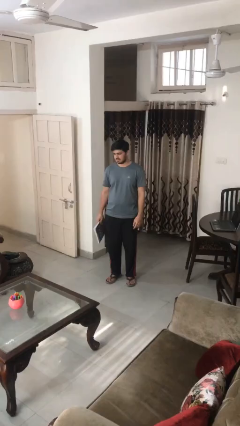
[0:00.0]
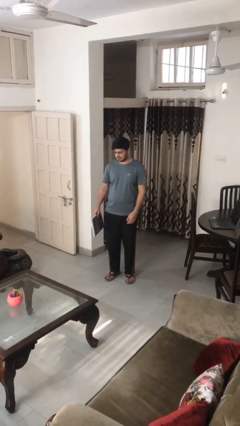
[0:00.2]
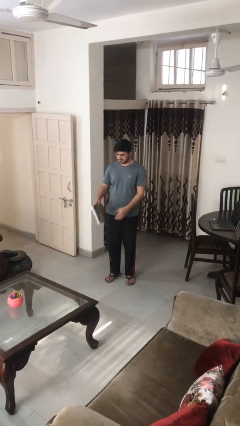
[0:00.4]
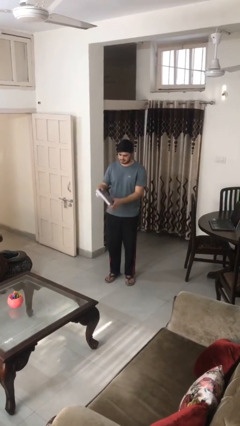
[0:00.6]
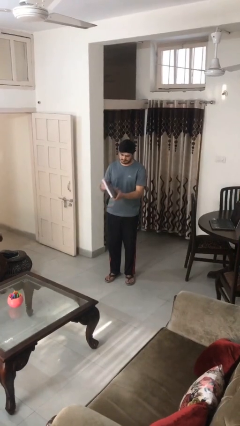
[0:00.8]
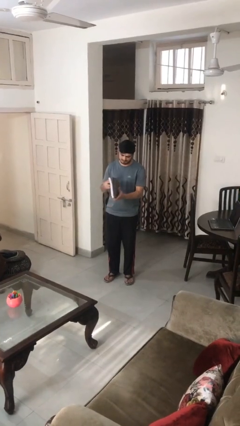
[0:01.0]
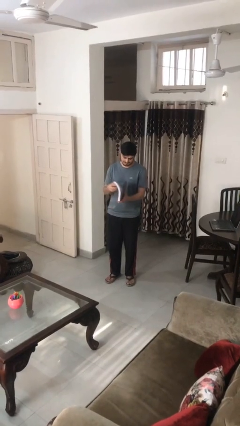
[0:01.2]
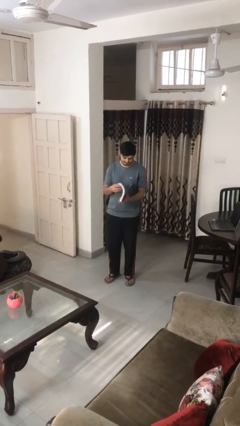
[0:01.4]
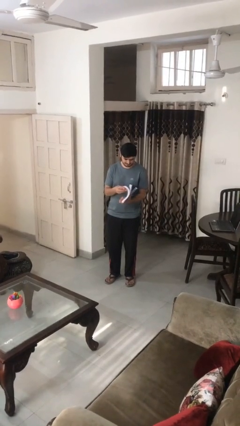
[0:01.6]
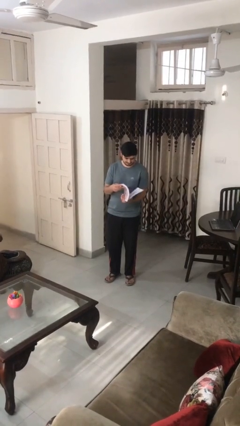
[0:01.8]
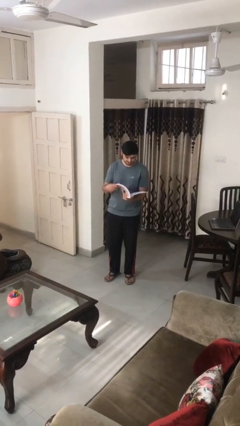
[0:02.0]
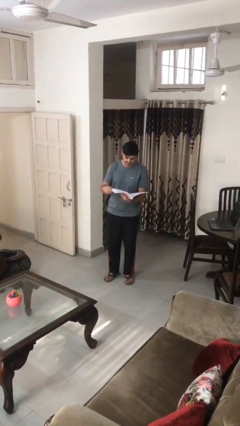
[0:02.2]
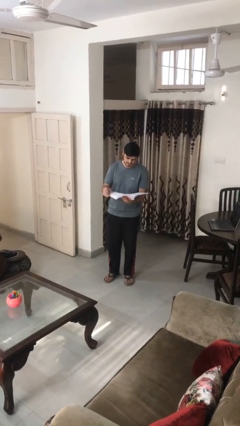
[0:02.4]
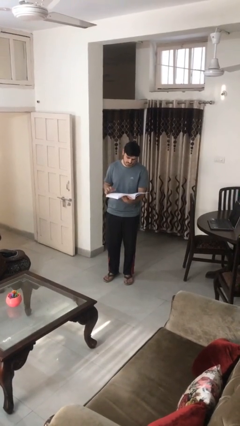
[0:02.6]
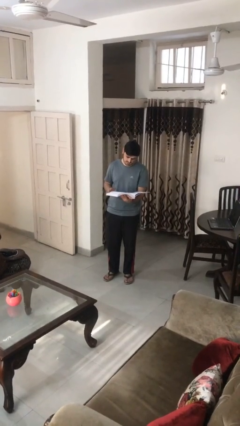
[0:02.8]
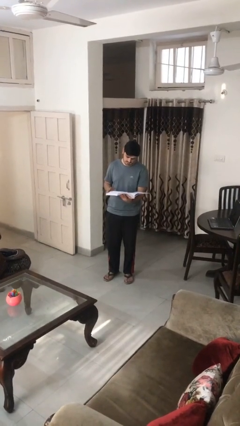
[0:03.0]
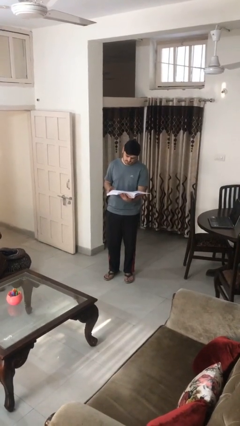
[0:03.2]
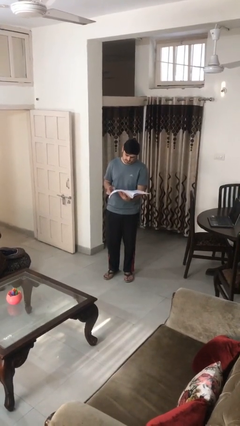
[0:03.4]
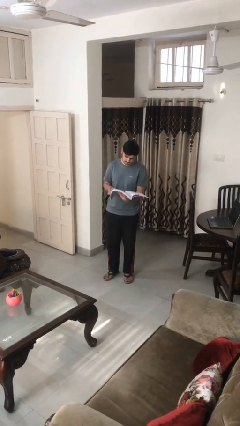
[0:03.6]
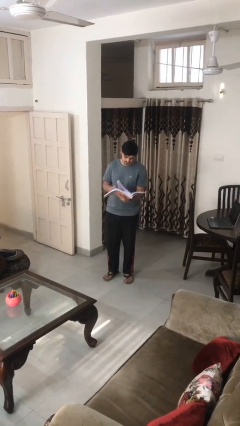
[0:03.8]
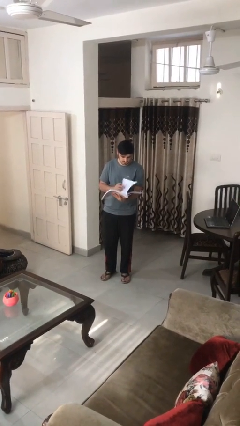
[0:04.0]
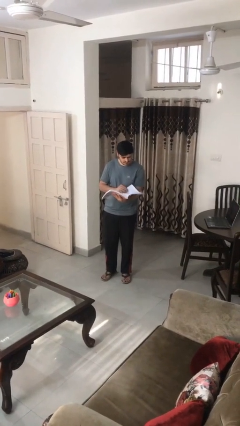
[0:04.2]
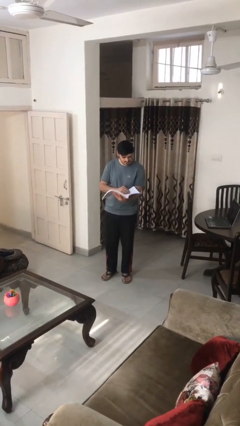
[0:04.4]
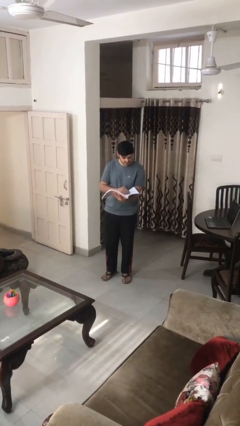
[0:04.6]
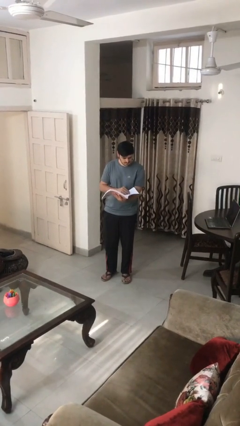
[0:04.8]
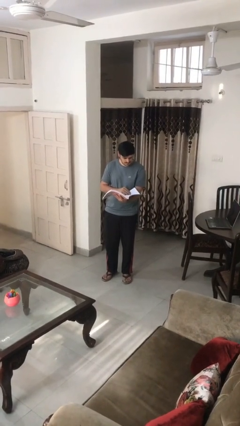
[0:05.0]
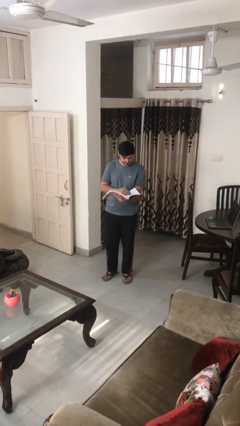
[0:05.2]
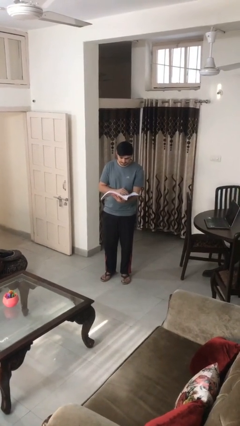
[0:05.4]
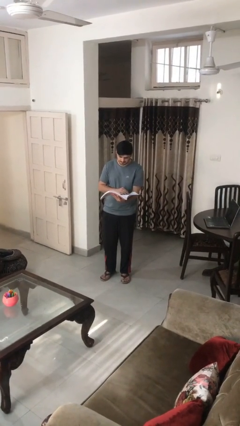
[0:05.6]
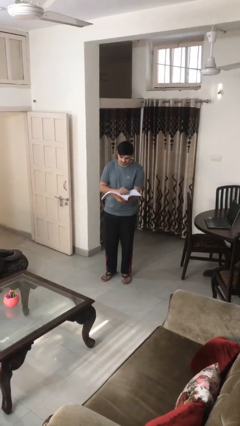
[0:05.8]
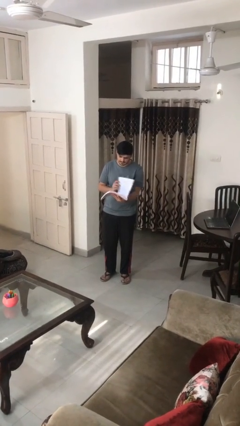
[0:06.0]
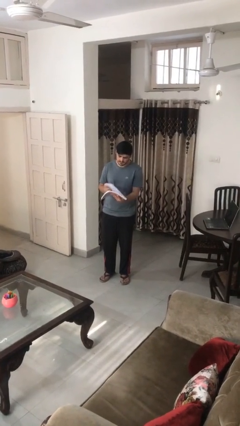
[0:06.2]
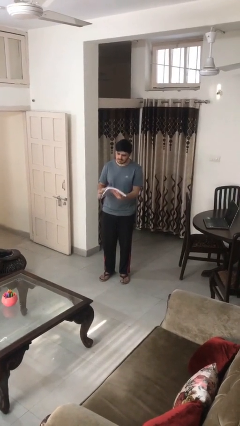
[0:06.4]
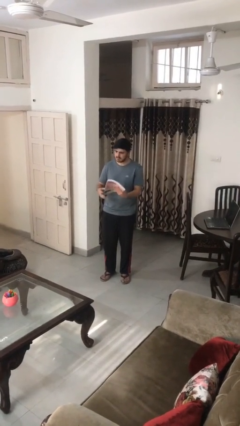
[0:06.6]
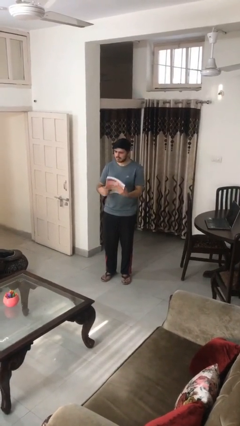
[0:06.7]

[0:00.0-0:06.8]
person reads document

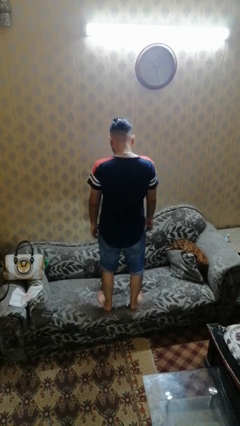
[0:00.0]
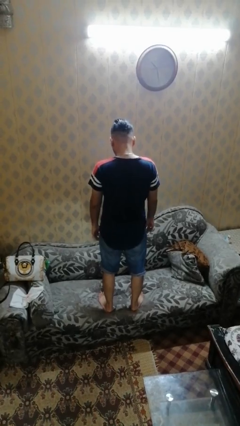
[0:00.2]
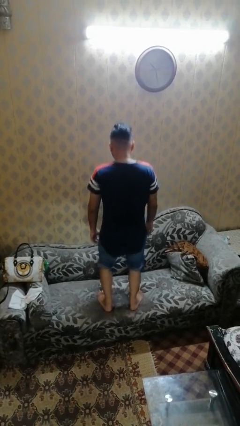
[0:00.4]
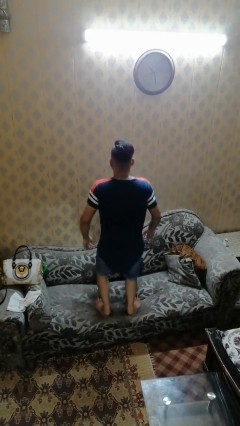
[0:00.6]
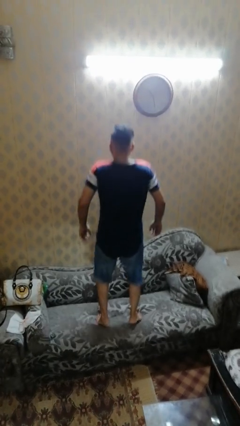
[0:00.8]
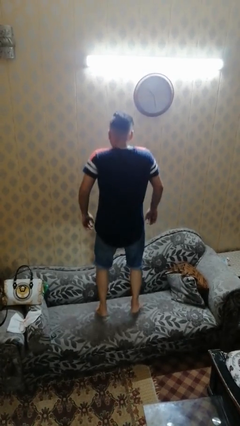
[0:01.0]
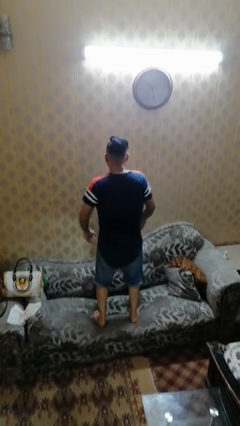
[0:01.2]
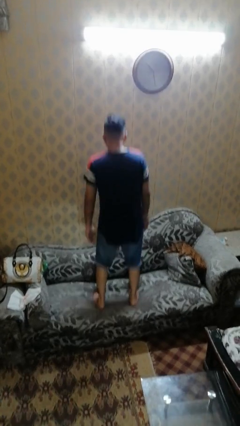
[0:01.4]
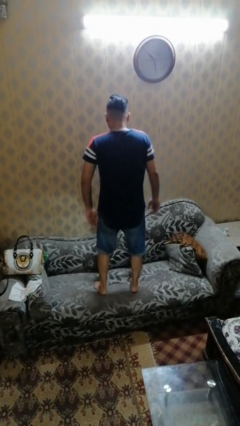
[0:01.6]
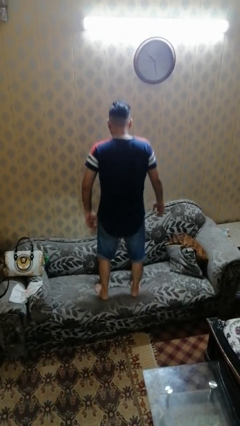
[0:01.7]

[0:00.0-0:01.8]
person jumps on couch

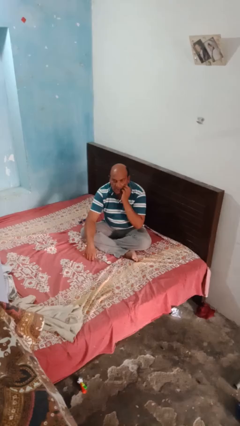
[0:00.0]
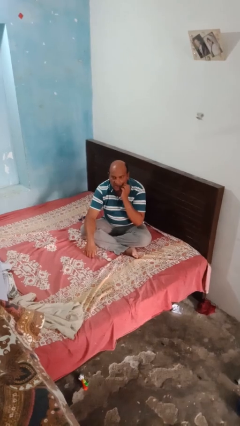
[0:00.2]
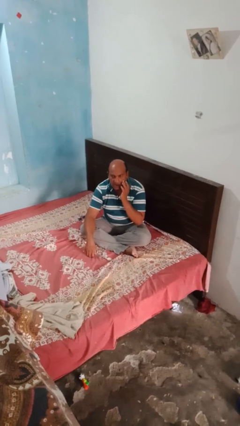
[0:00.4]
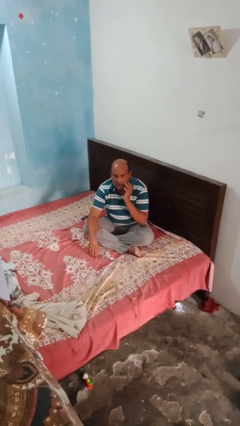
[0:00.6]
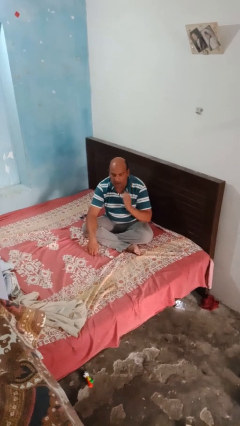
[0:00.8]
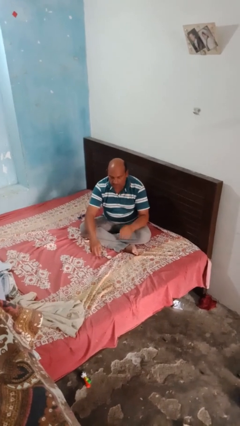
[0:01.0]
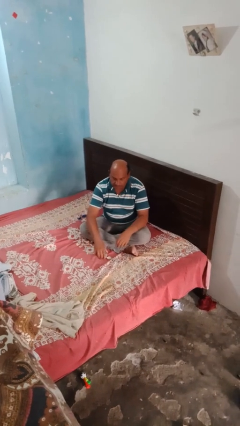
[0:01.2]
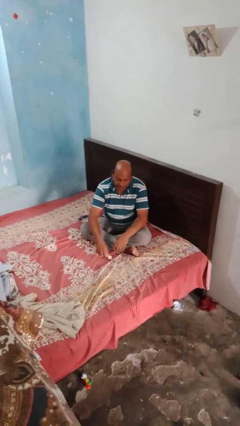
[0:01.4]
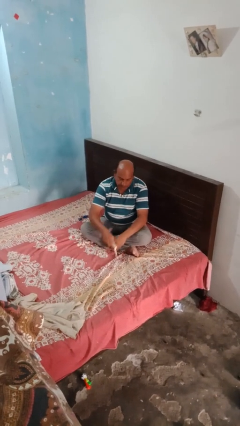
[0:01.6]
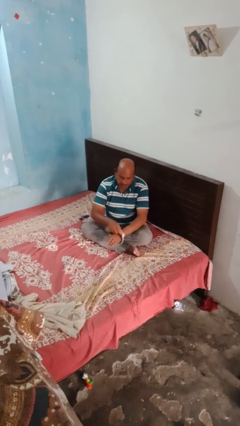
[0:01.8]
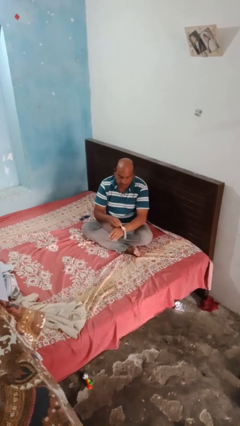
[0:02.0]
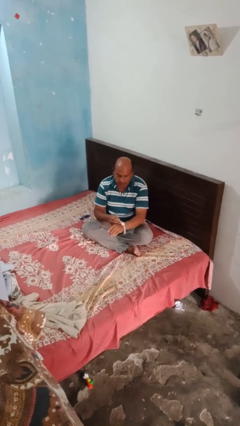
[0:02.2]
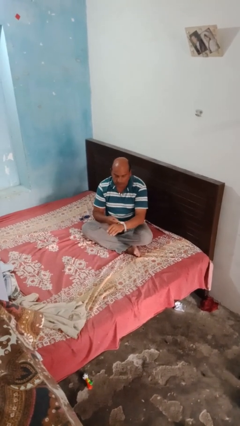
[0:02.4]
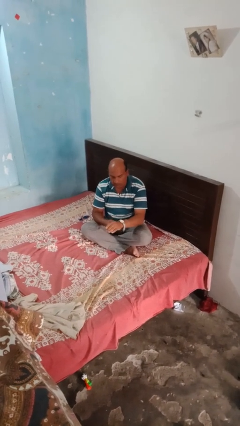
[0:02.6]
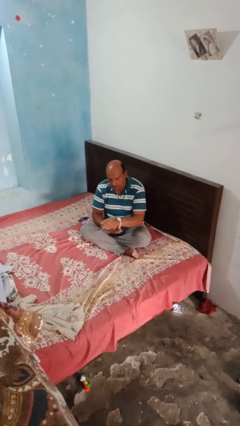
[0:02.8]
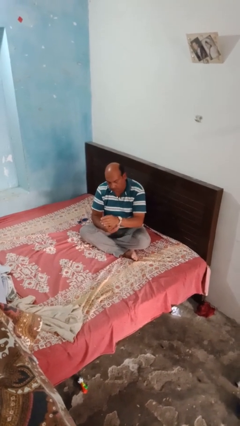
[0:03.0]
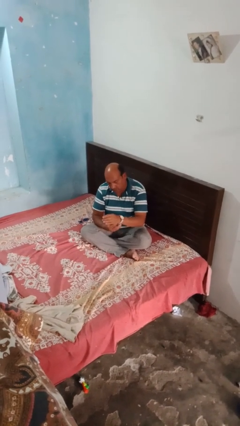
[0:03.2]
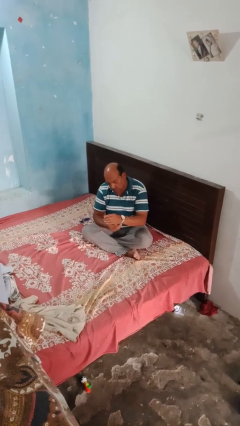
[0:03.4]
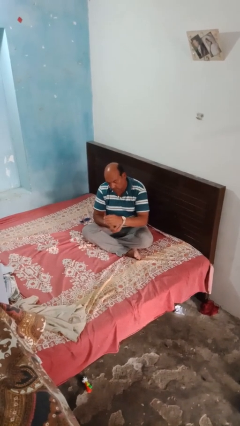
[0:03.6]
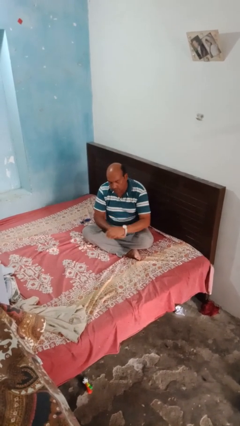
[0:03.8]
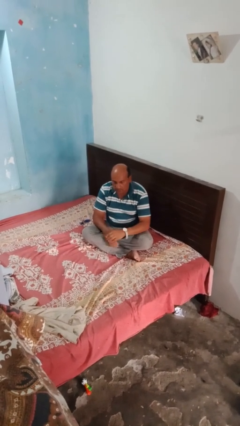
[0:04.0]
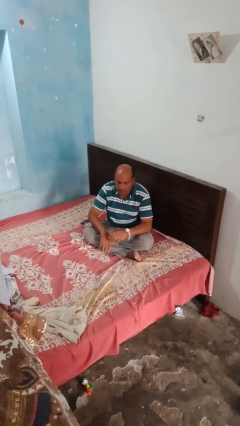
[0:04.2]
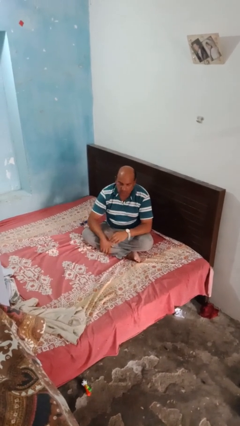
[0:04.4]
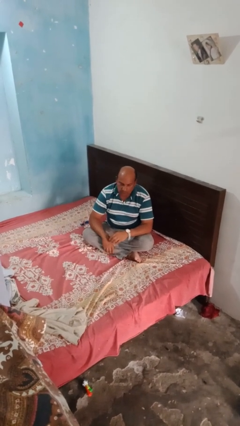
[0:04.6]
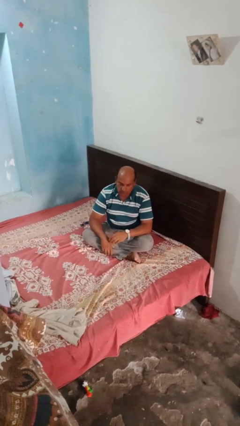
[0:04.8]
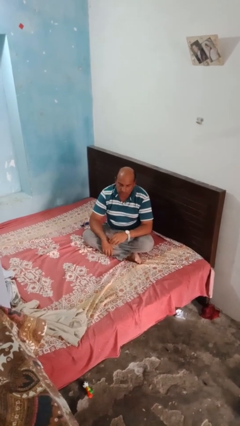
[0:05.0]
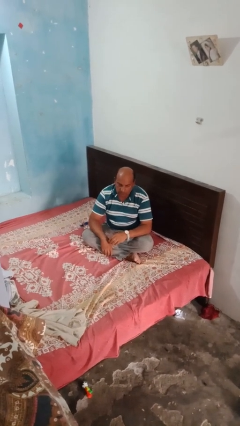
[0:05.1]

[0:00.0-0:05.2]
person puts on wristwatch

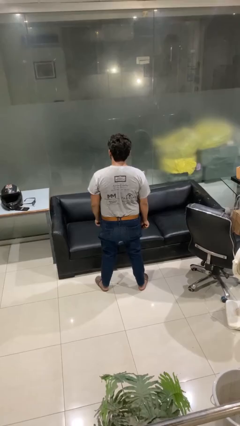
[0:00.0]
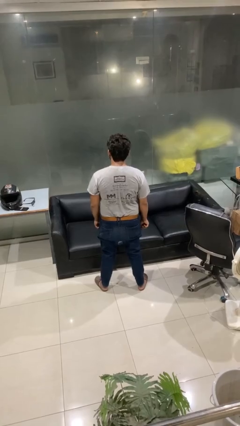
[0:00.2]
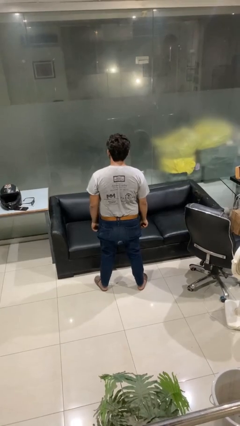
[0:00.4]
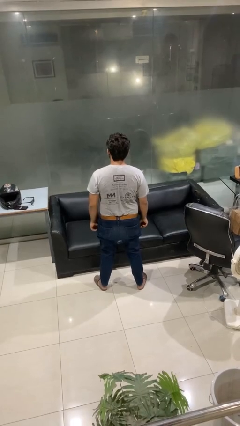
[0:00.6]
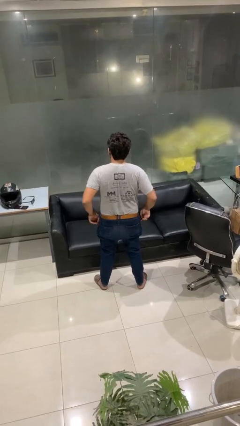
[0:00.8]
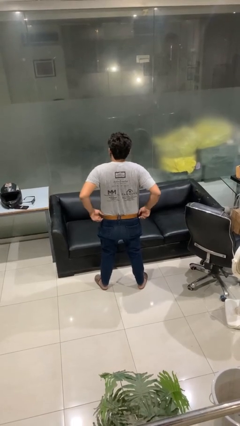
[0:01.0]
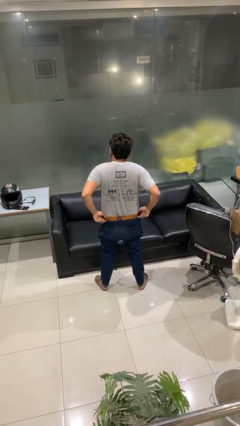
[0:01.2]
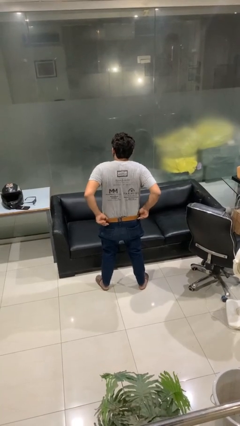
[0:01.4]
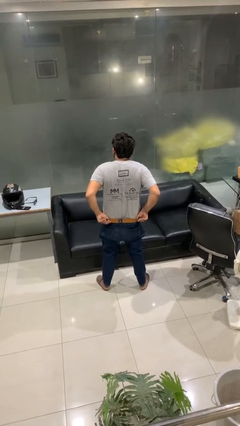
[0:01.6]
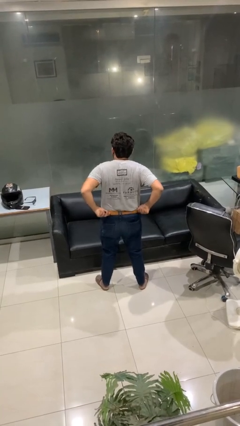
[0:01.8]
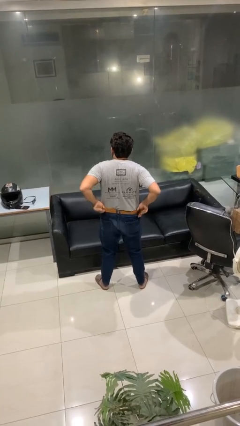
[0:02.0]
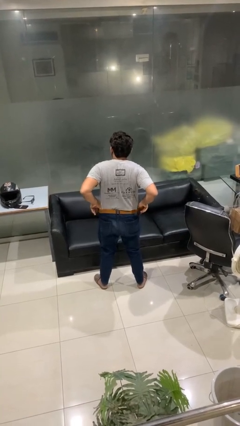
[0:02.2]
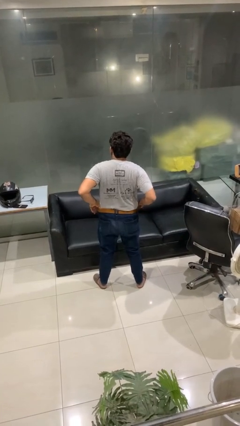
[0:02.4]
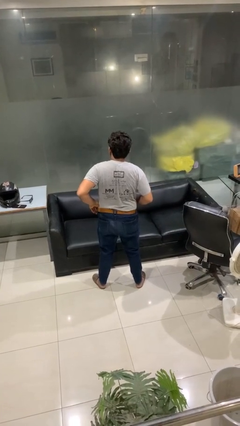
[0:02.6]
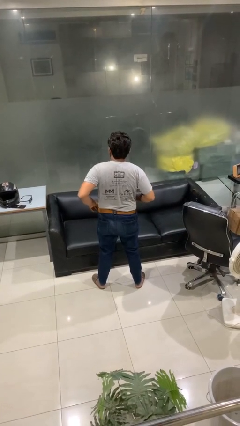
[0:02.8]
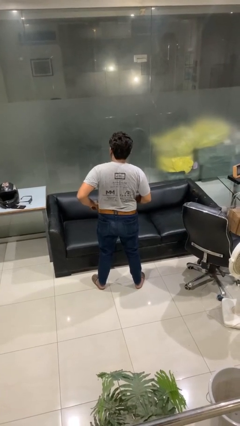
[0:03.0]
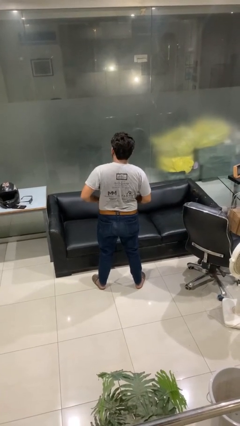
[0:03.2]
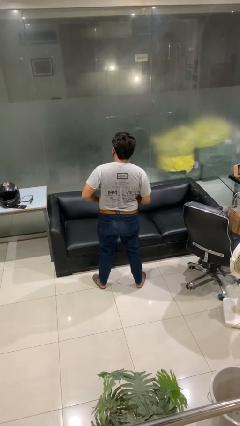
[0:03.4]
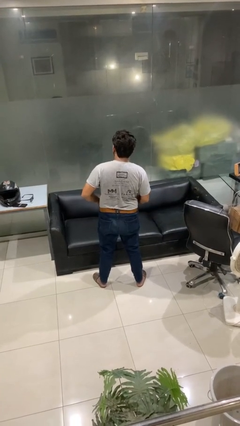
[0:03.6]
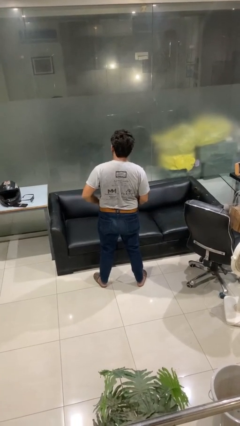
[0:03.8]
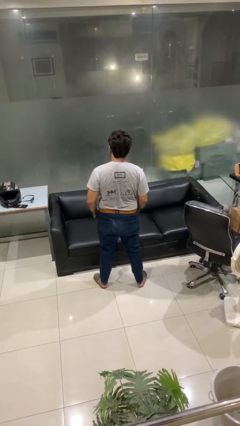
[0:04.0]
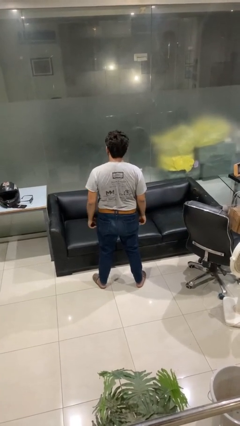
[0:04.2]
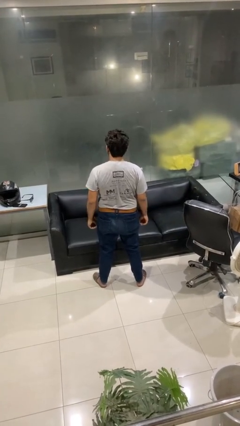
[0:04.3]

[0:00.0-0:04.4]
person hikes up pants
